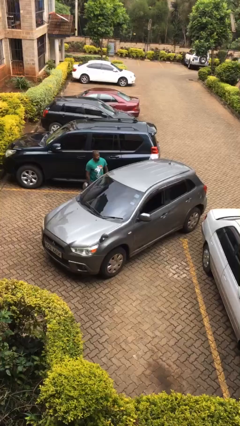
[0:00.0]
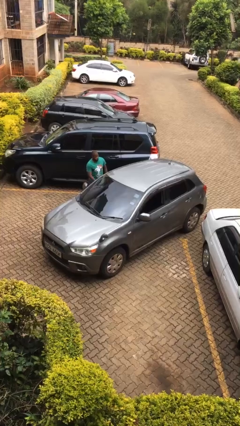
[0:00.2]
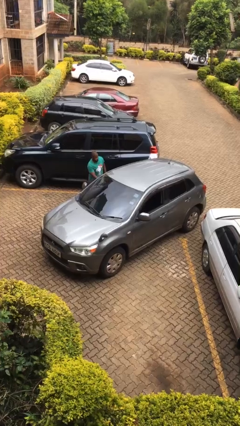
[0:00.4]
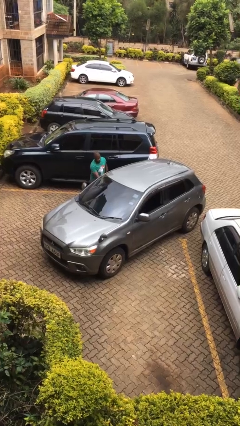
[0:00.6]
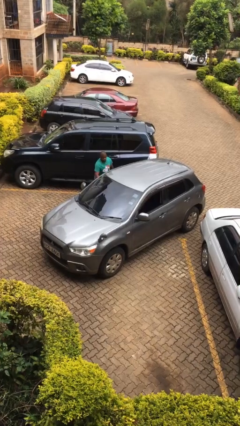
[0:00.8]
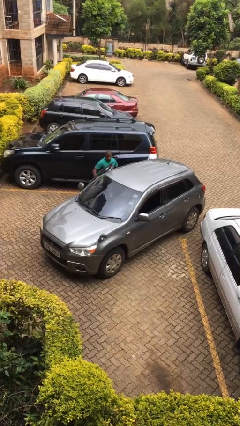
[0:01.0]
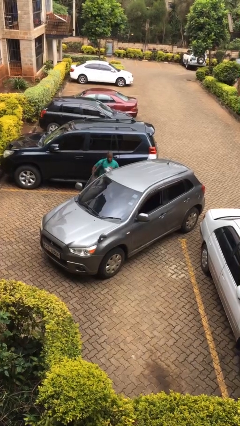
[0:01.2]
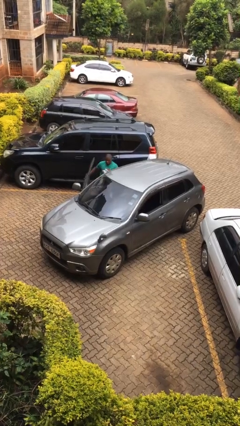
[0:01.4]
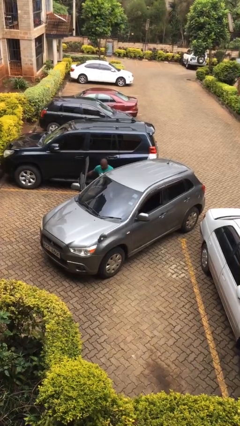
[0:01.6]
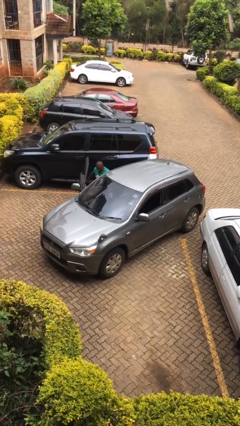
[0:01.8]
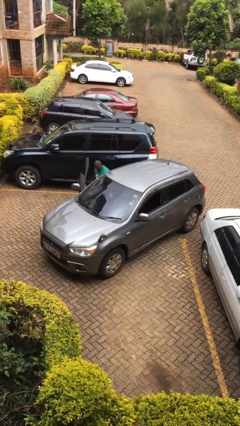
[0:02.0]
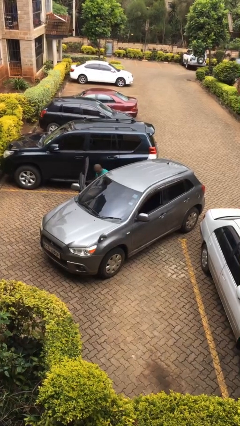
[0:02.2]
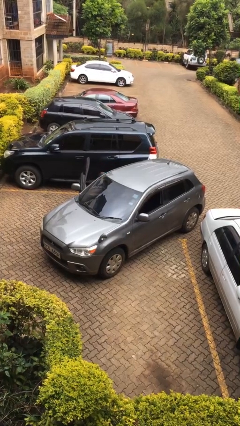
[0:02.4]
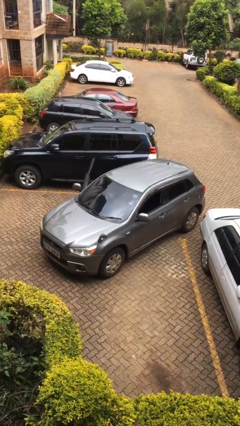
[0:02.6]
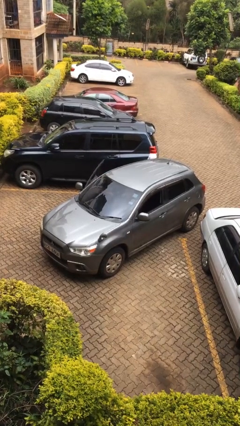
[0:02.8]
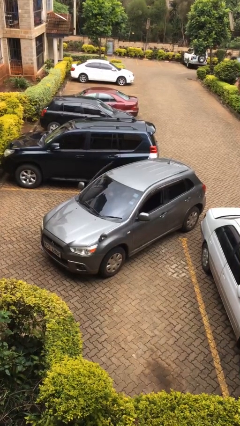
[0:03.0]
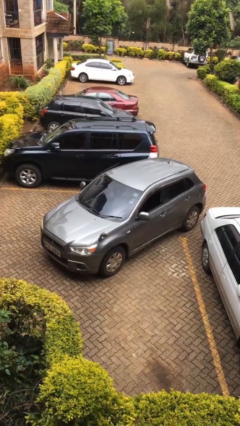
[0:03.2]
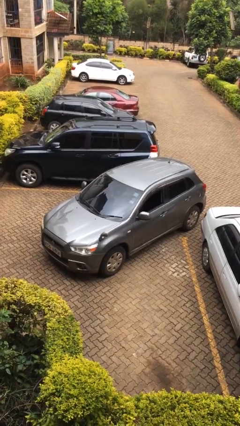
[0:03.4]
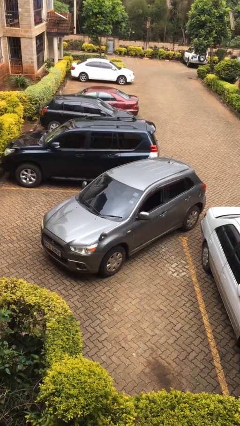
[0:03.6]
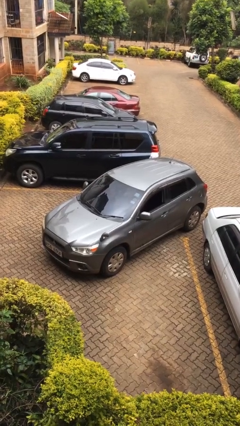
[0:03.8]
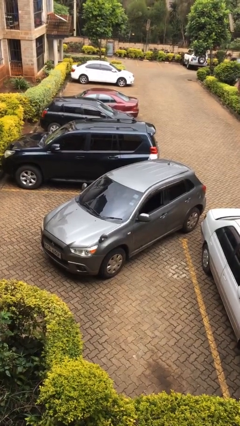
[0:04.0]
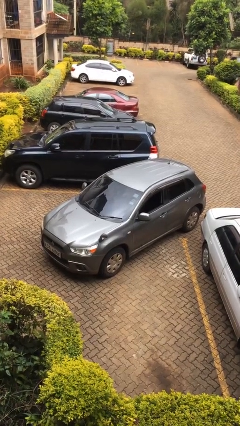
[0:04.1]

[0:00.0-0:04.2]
car picks up person

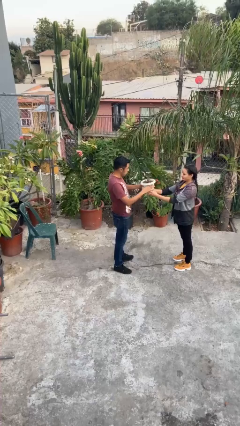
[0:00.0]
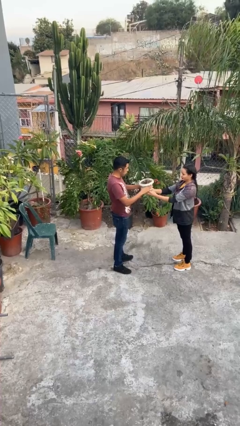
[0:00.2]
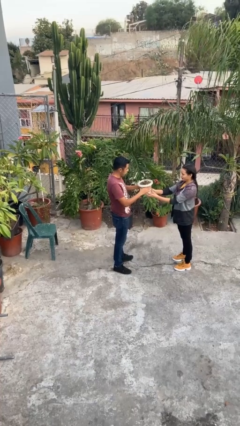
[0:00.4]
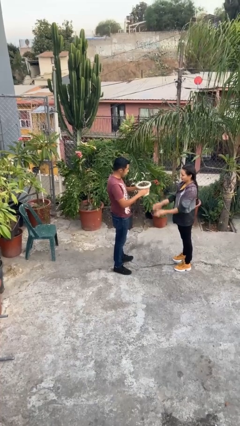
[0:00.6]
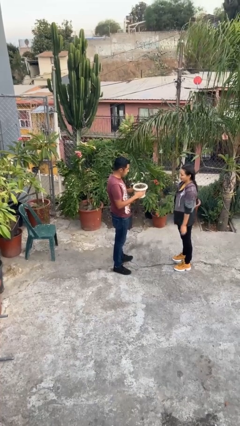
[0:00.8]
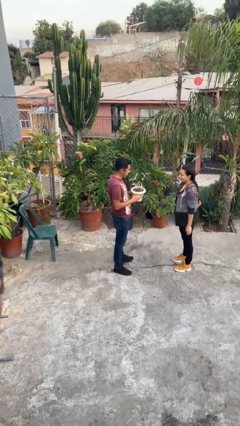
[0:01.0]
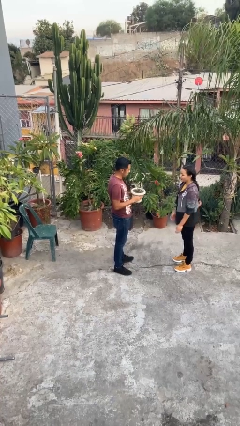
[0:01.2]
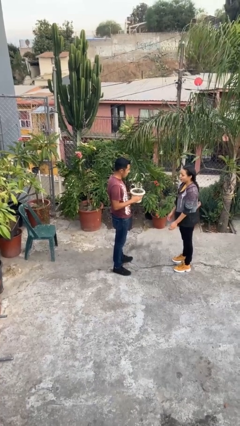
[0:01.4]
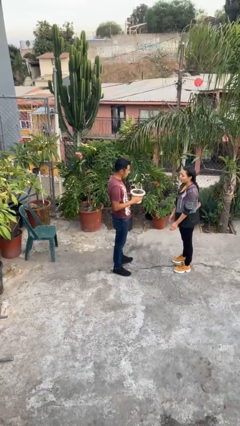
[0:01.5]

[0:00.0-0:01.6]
person transfers object to person

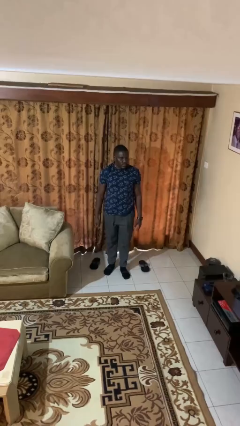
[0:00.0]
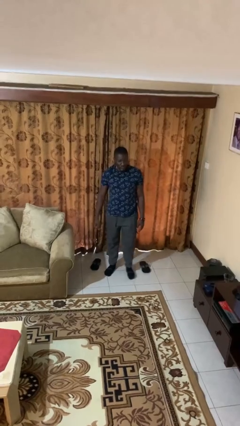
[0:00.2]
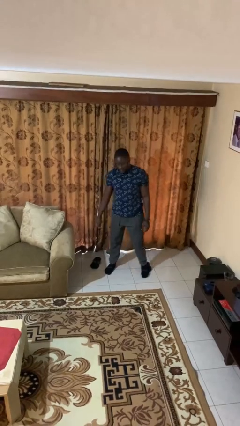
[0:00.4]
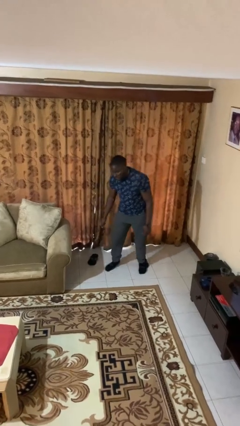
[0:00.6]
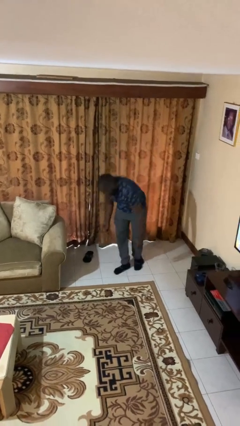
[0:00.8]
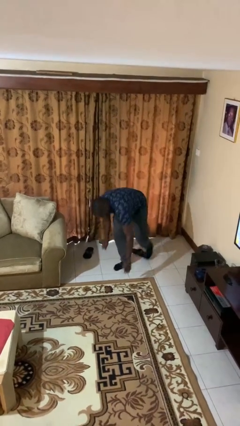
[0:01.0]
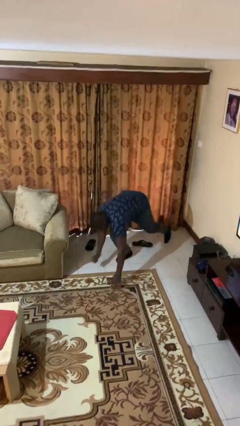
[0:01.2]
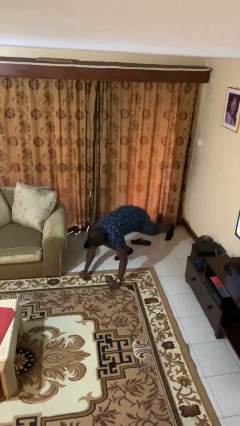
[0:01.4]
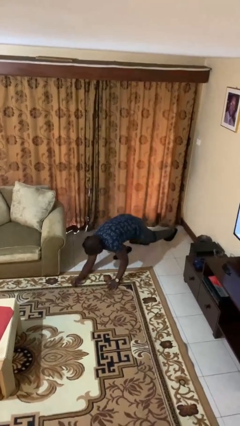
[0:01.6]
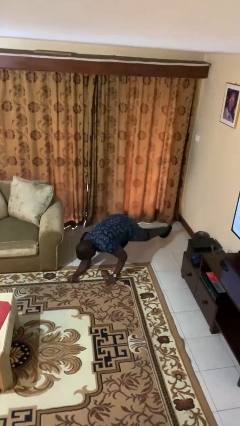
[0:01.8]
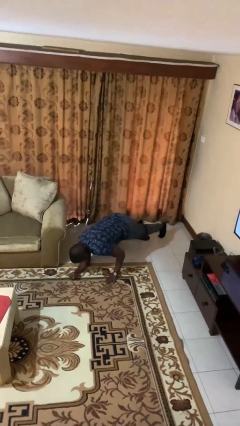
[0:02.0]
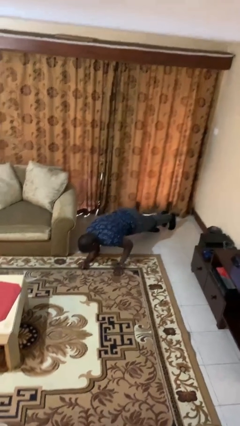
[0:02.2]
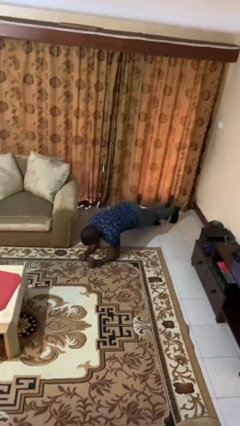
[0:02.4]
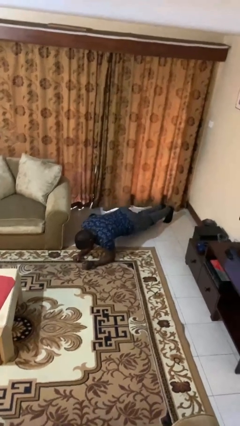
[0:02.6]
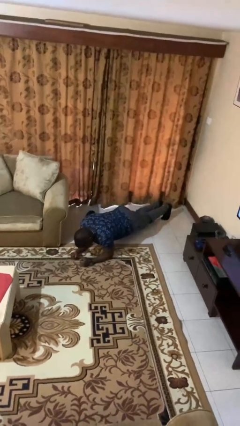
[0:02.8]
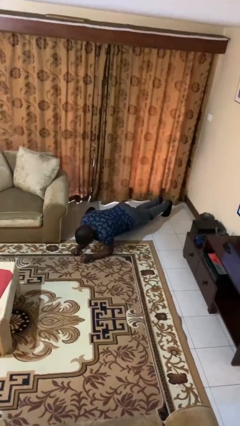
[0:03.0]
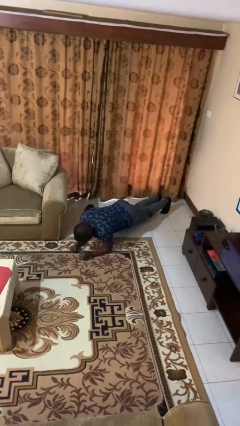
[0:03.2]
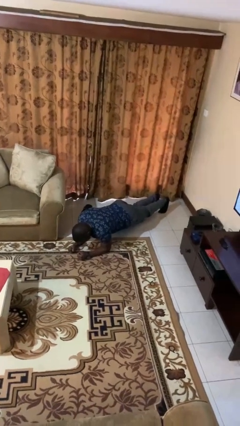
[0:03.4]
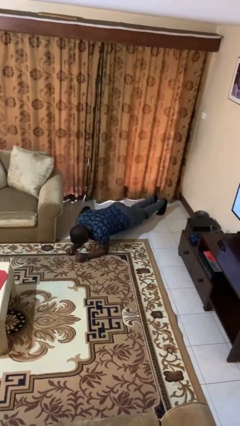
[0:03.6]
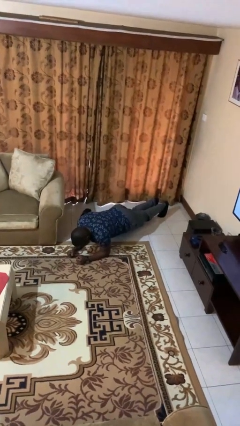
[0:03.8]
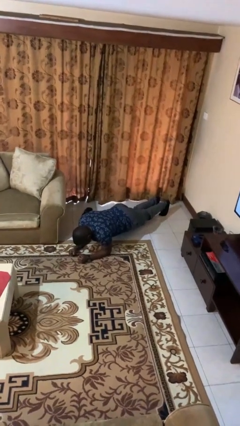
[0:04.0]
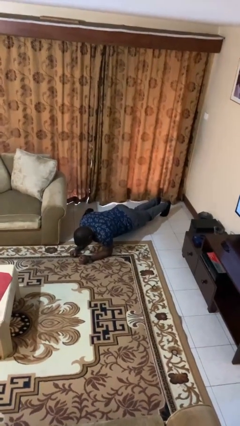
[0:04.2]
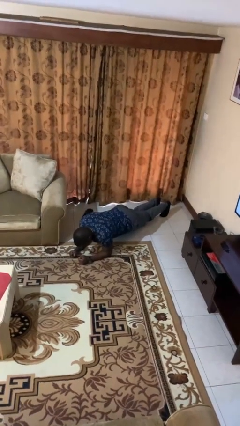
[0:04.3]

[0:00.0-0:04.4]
person exercises with plank

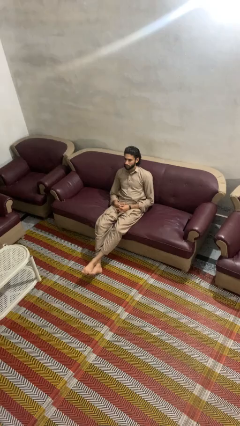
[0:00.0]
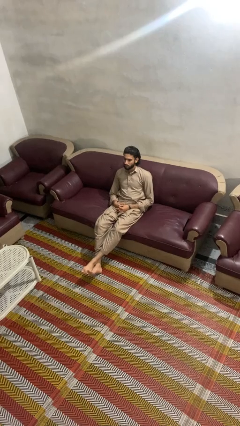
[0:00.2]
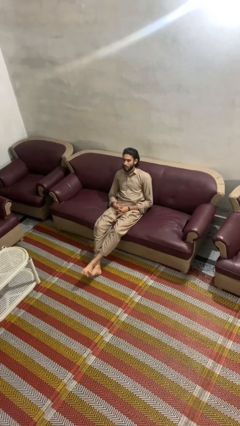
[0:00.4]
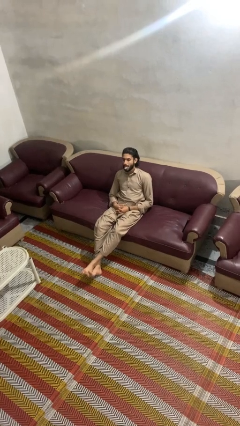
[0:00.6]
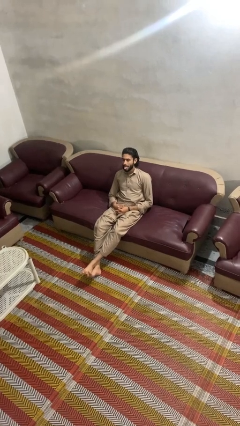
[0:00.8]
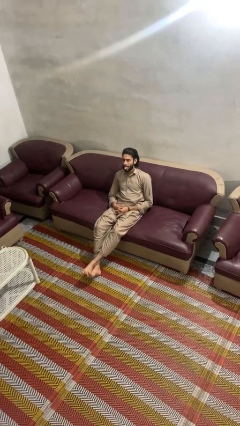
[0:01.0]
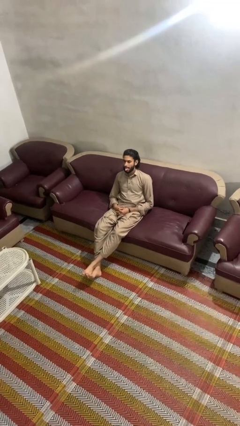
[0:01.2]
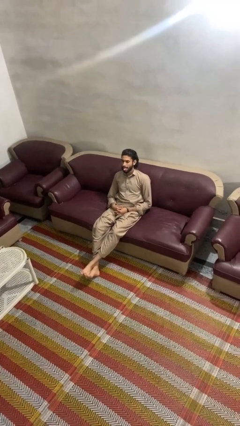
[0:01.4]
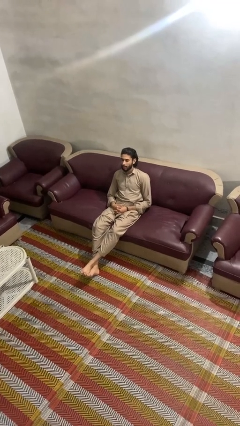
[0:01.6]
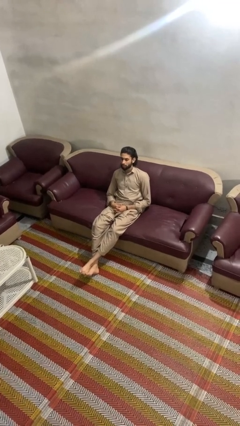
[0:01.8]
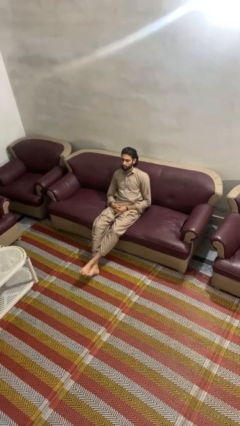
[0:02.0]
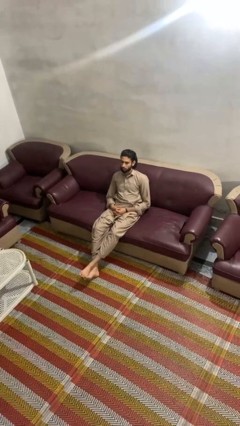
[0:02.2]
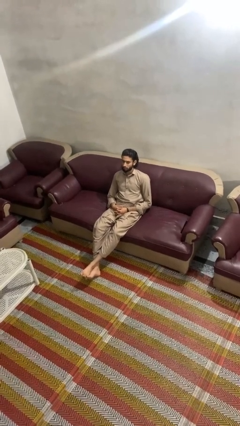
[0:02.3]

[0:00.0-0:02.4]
person sticks out tongue

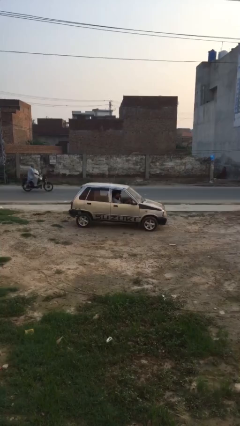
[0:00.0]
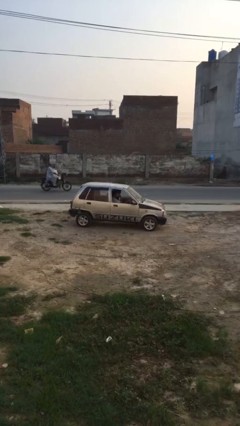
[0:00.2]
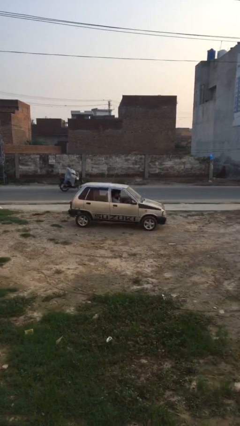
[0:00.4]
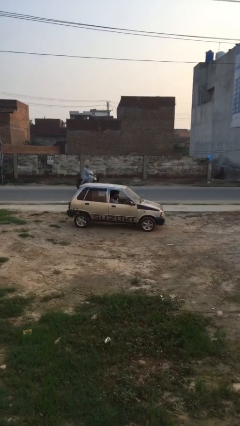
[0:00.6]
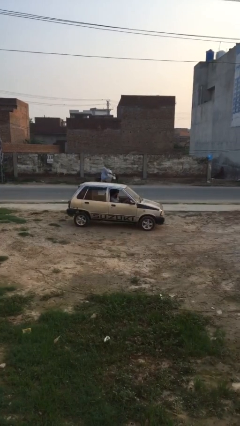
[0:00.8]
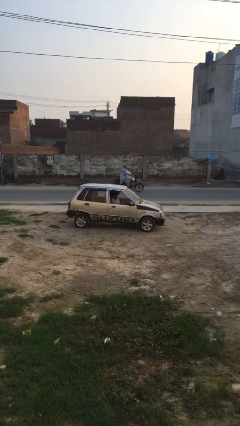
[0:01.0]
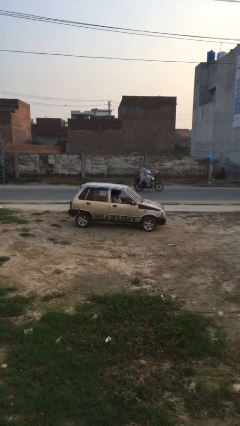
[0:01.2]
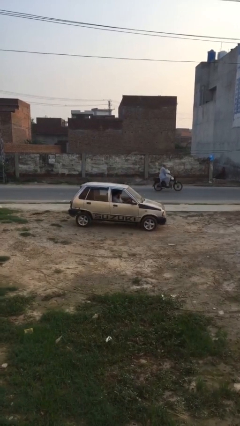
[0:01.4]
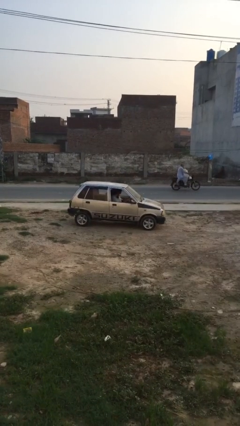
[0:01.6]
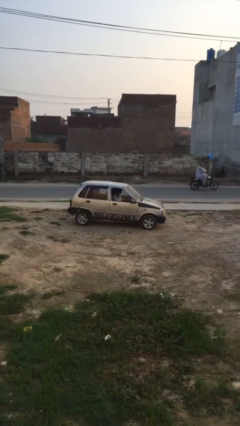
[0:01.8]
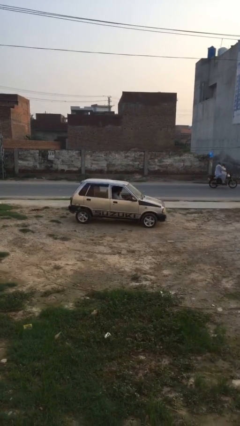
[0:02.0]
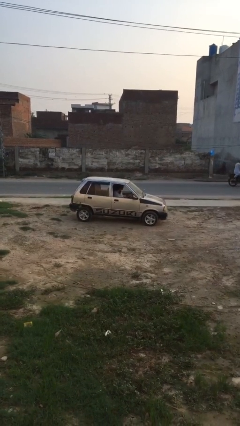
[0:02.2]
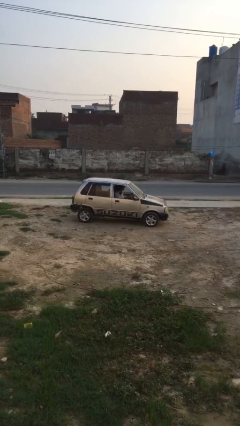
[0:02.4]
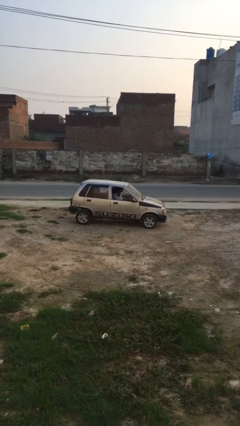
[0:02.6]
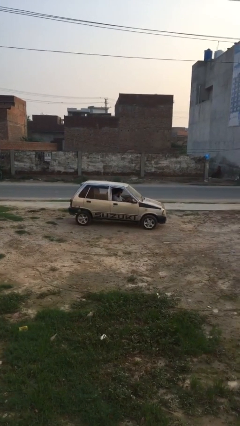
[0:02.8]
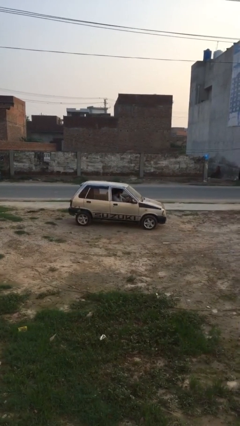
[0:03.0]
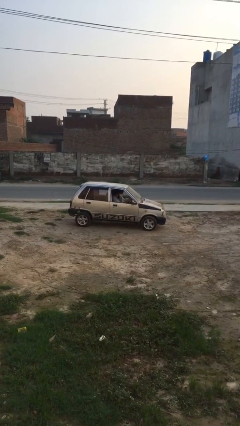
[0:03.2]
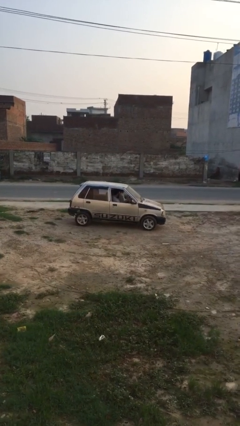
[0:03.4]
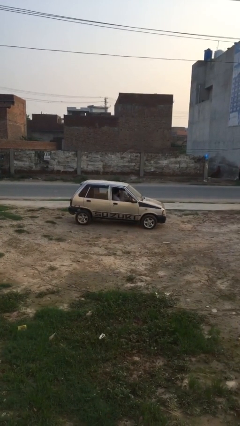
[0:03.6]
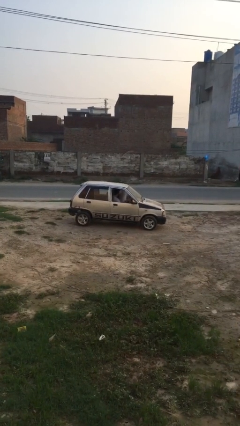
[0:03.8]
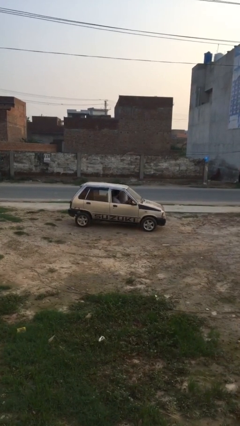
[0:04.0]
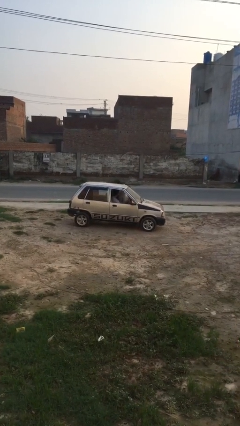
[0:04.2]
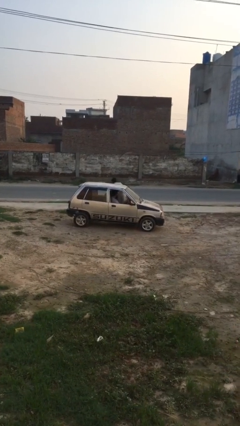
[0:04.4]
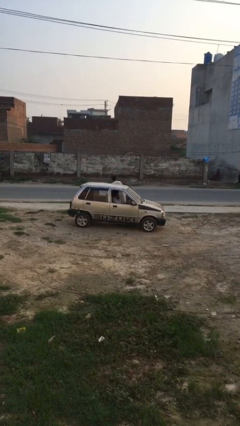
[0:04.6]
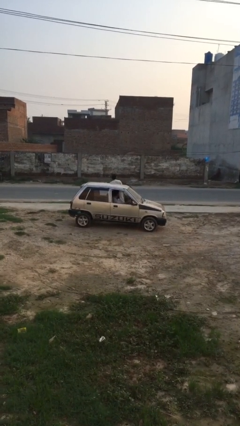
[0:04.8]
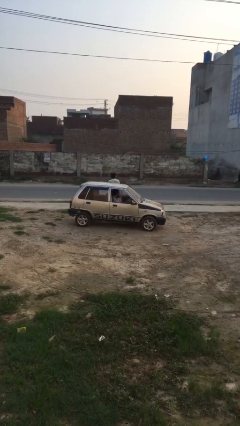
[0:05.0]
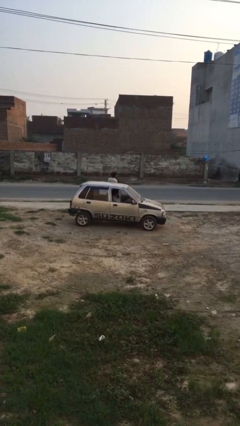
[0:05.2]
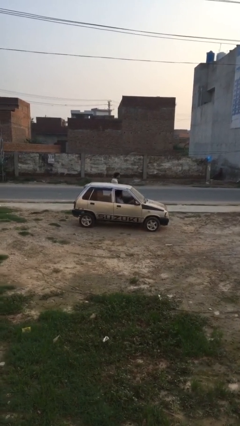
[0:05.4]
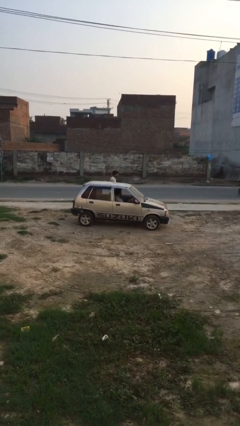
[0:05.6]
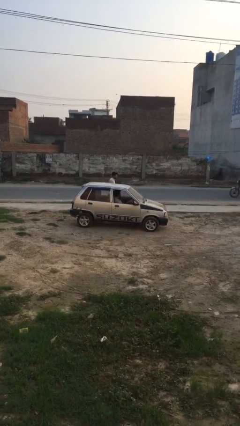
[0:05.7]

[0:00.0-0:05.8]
car drops off person
